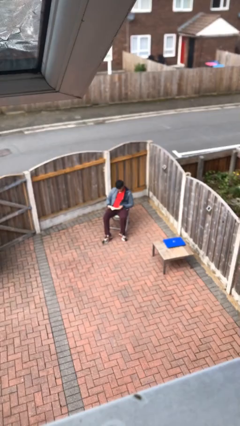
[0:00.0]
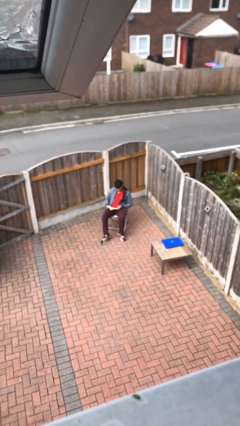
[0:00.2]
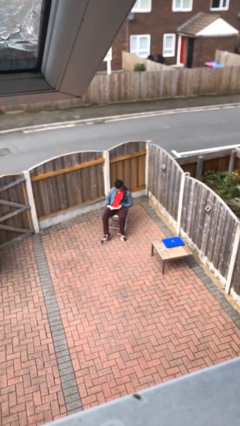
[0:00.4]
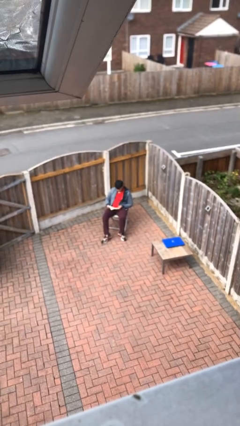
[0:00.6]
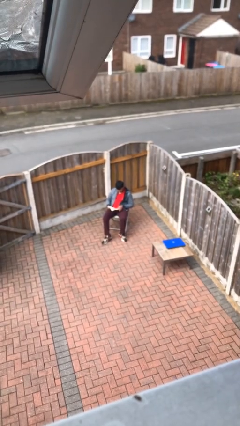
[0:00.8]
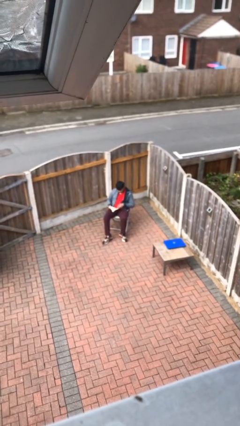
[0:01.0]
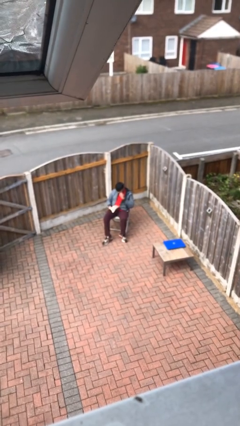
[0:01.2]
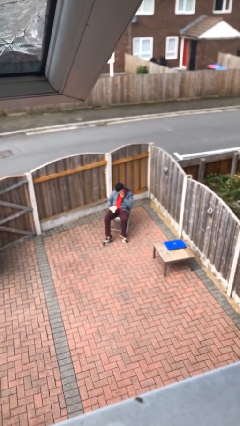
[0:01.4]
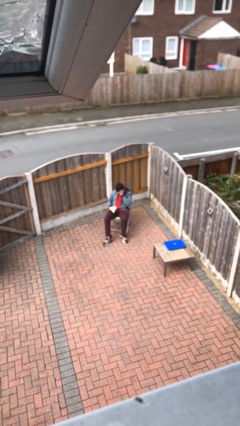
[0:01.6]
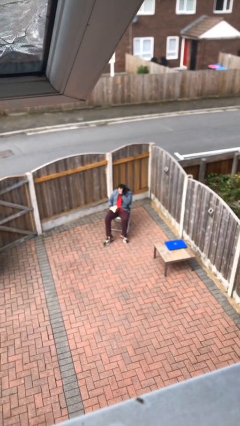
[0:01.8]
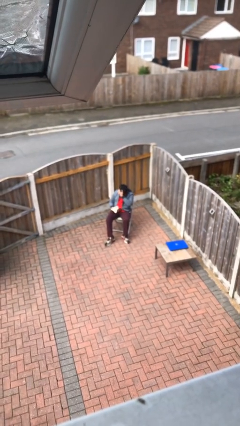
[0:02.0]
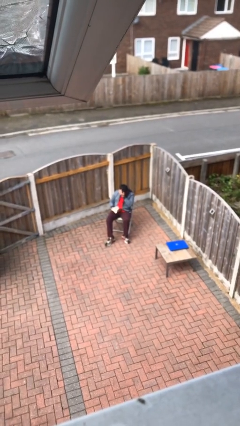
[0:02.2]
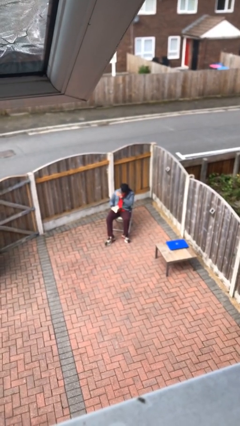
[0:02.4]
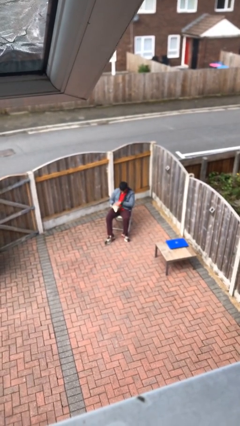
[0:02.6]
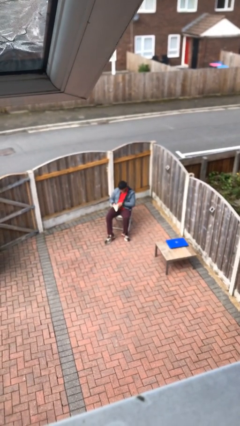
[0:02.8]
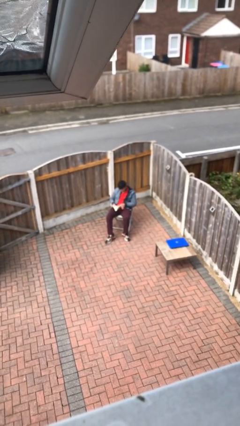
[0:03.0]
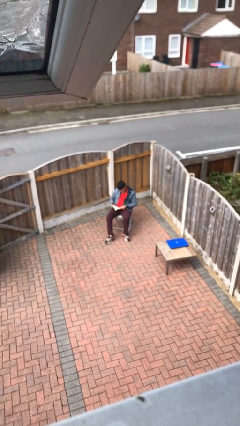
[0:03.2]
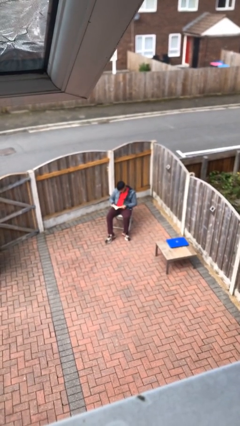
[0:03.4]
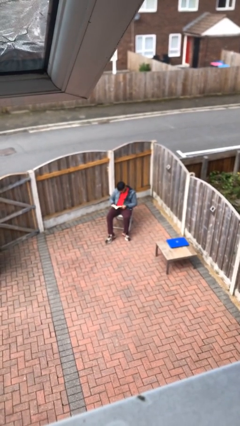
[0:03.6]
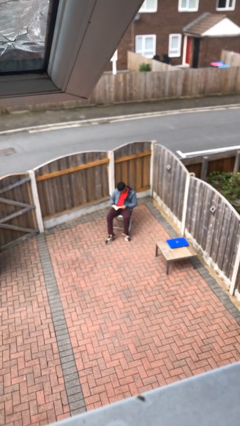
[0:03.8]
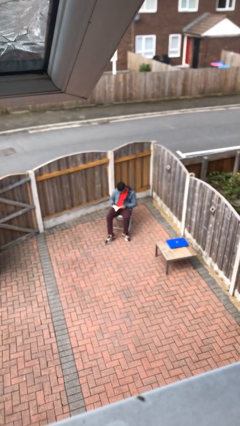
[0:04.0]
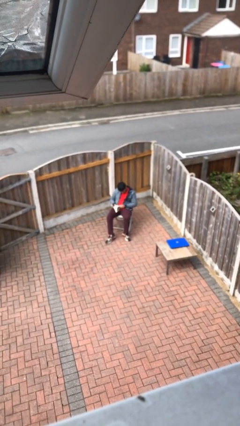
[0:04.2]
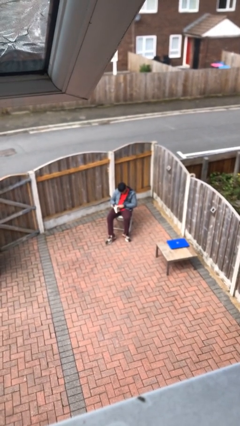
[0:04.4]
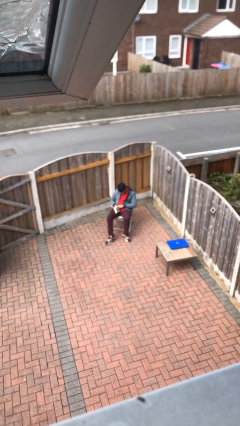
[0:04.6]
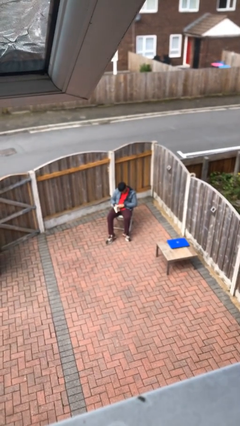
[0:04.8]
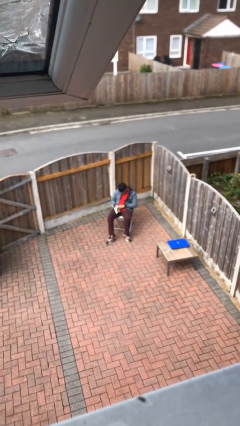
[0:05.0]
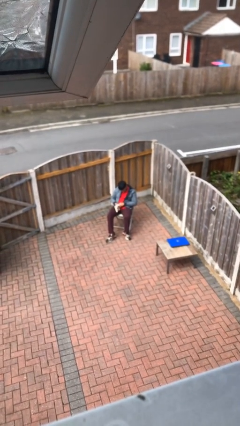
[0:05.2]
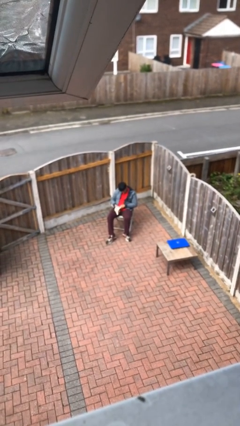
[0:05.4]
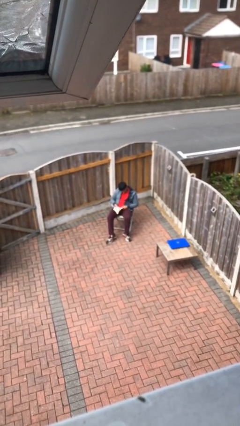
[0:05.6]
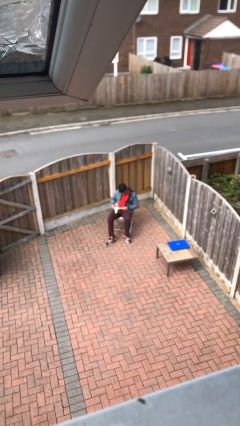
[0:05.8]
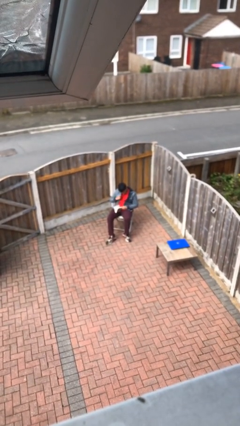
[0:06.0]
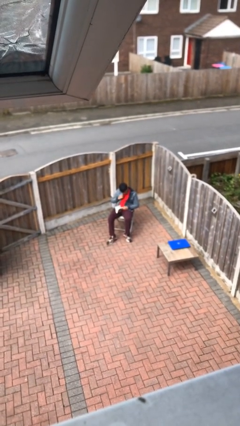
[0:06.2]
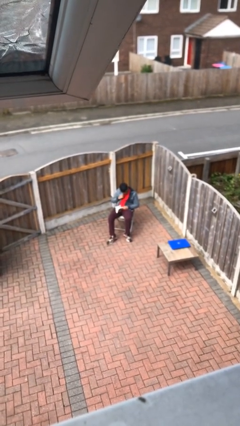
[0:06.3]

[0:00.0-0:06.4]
person reads document

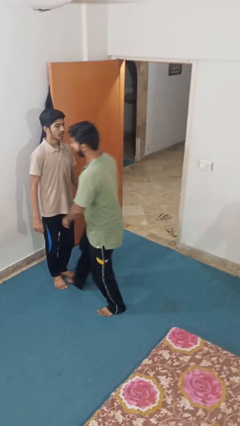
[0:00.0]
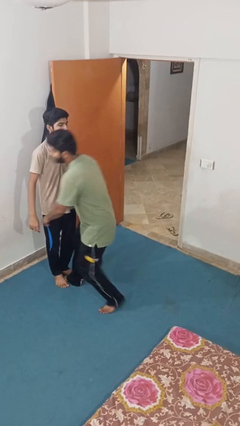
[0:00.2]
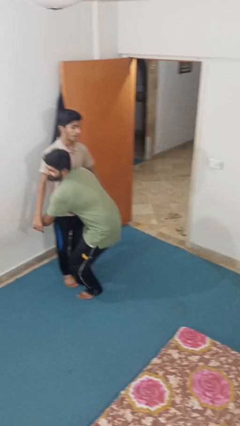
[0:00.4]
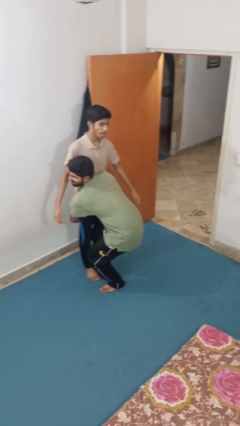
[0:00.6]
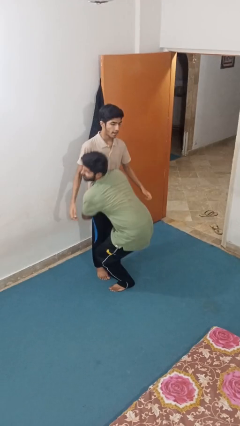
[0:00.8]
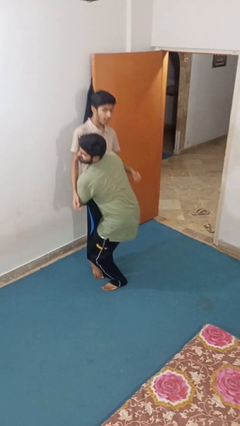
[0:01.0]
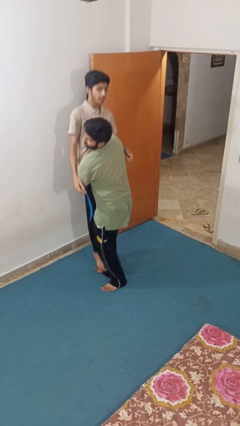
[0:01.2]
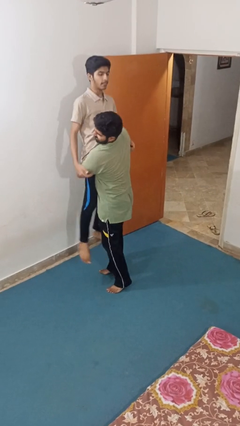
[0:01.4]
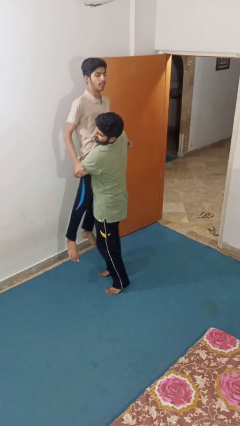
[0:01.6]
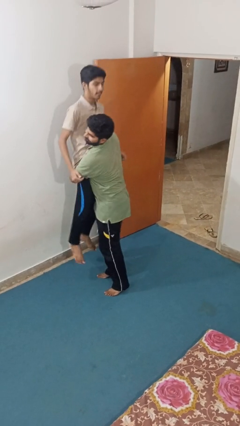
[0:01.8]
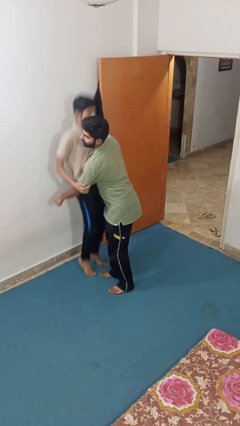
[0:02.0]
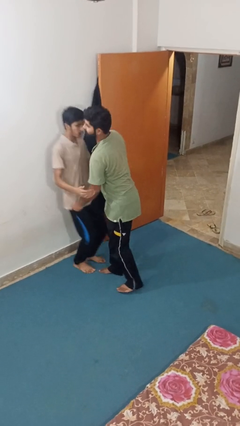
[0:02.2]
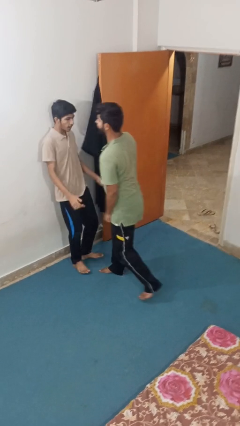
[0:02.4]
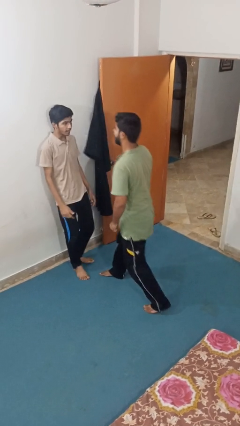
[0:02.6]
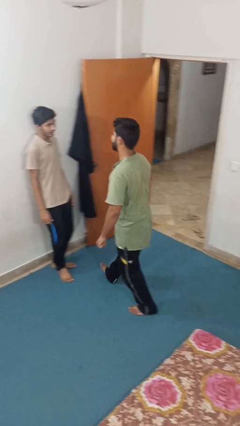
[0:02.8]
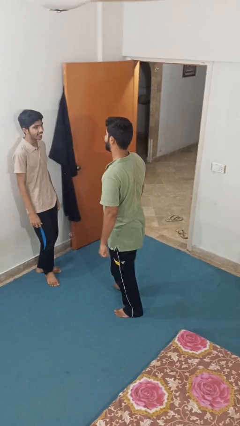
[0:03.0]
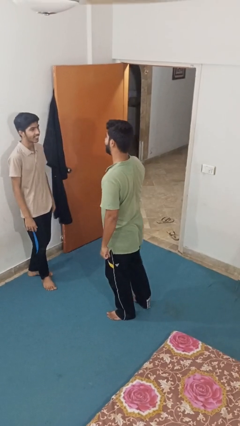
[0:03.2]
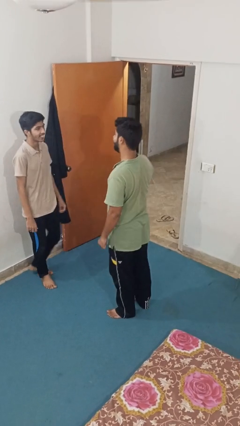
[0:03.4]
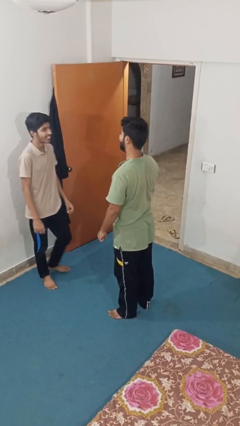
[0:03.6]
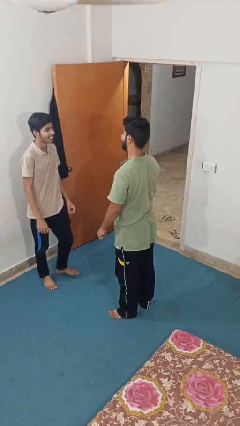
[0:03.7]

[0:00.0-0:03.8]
person picks up person

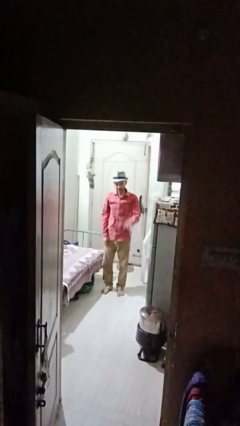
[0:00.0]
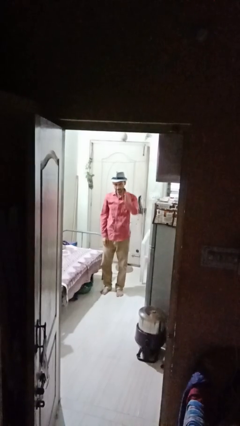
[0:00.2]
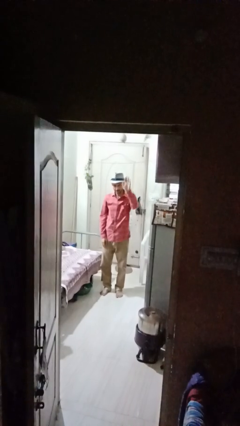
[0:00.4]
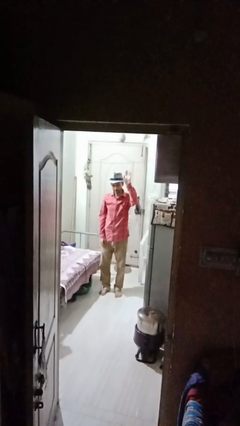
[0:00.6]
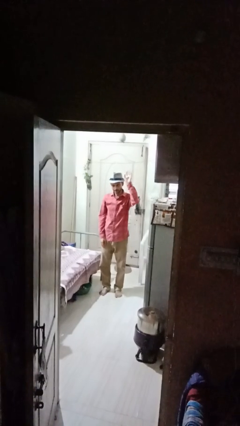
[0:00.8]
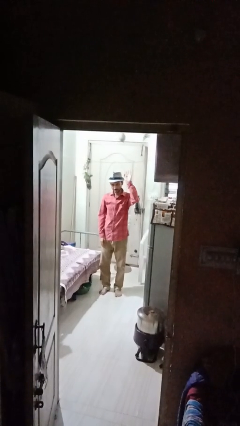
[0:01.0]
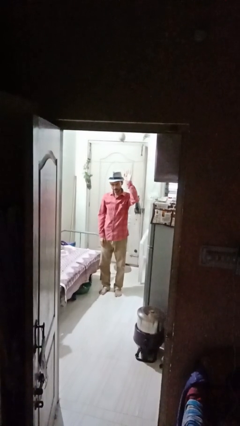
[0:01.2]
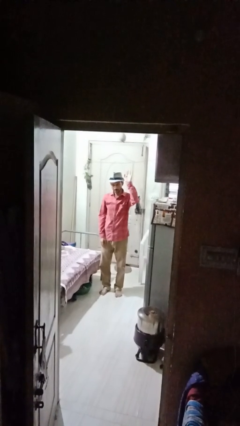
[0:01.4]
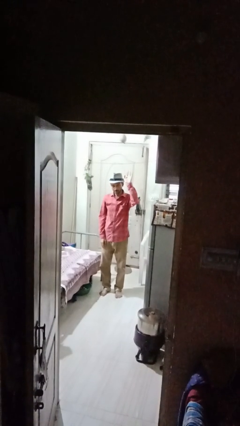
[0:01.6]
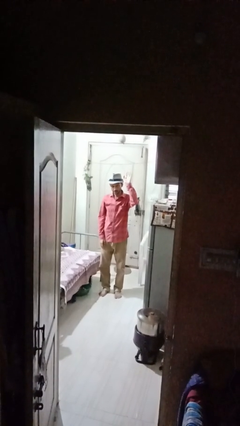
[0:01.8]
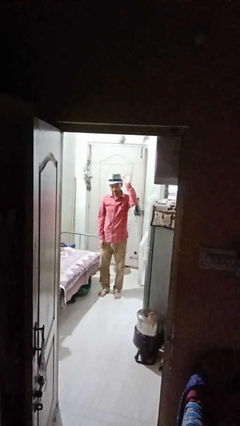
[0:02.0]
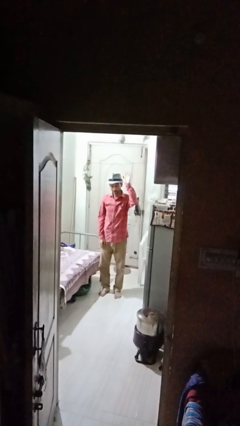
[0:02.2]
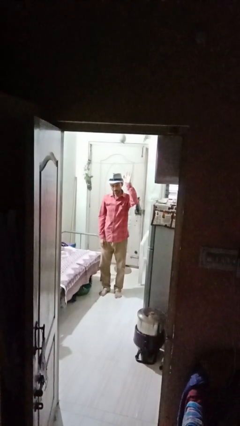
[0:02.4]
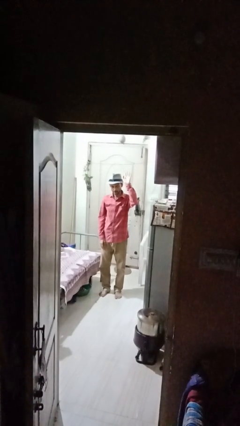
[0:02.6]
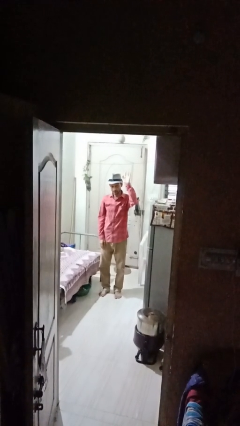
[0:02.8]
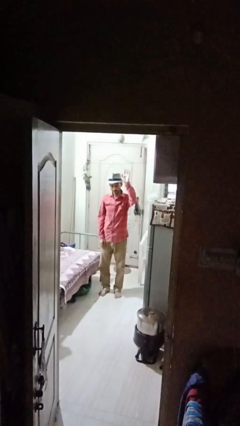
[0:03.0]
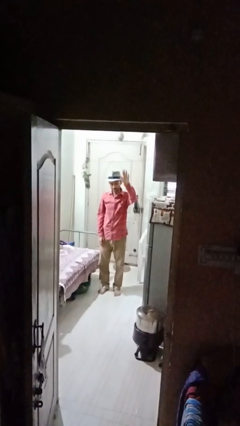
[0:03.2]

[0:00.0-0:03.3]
person gestures raise hand

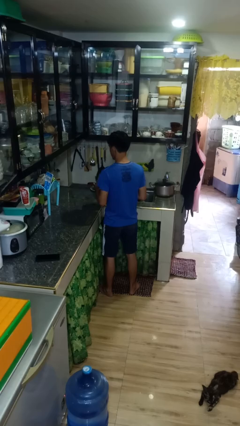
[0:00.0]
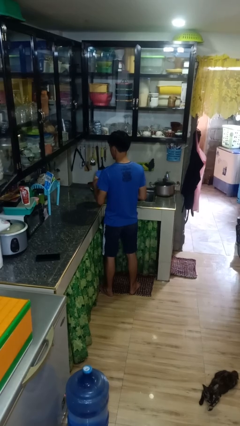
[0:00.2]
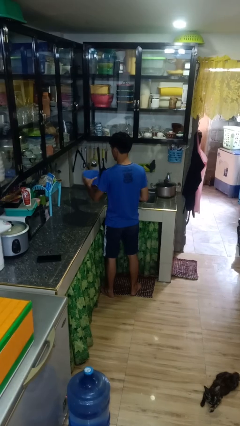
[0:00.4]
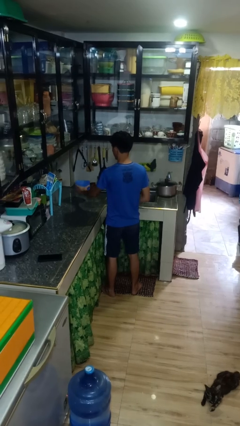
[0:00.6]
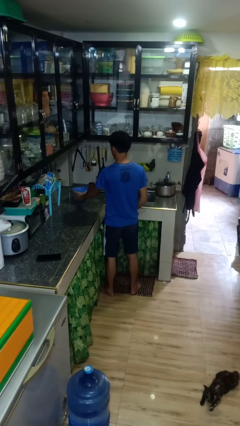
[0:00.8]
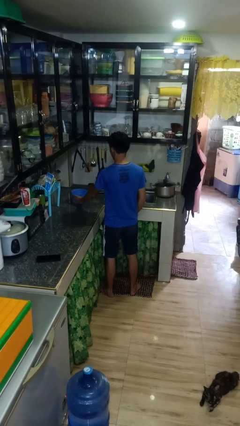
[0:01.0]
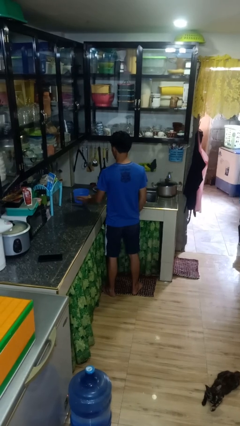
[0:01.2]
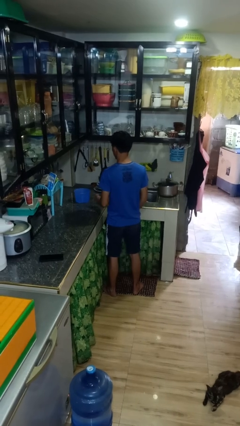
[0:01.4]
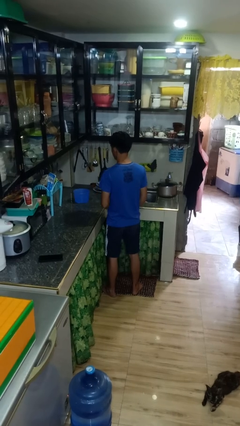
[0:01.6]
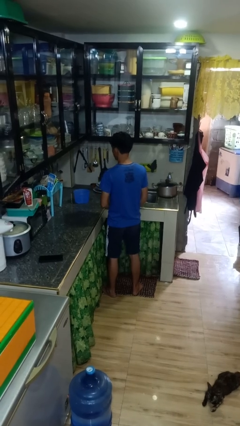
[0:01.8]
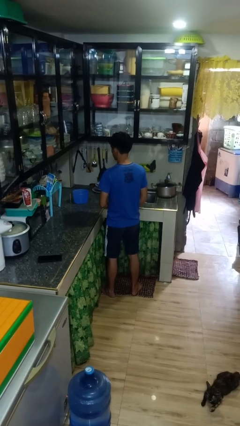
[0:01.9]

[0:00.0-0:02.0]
person puts down object on countertop

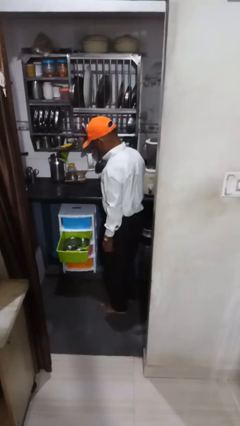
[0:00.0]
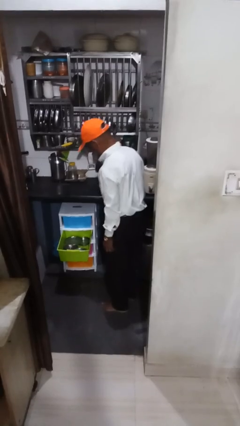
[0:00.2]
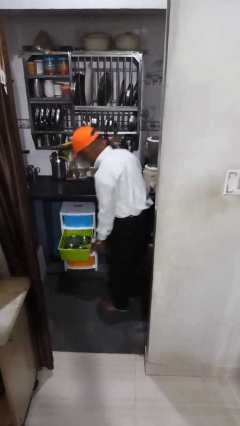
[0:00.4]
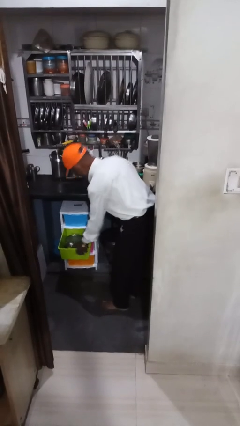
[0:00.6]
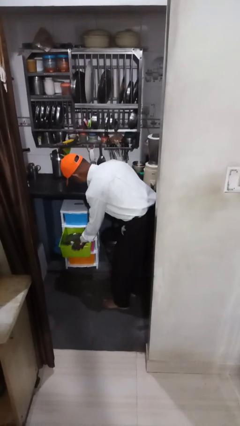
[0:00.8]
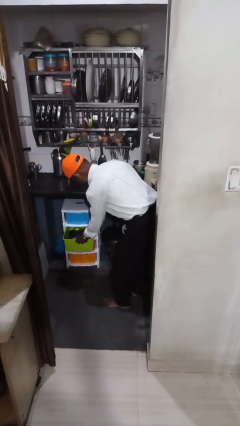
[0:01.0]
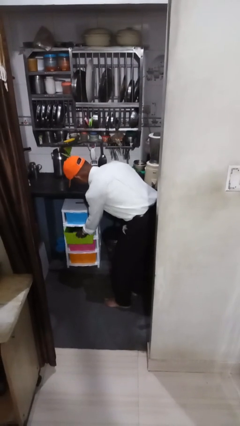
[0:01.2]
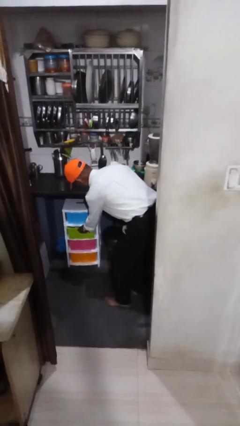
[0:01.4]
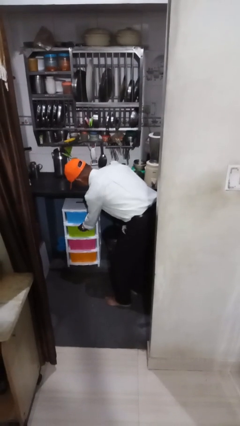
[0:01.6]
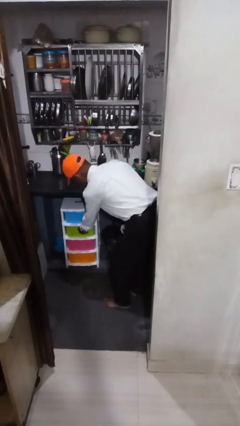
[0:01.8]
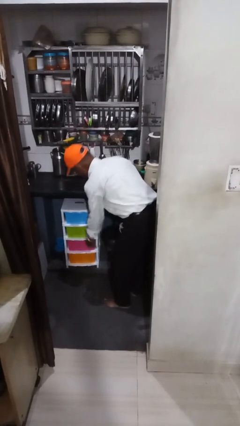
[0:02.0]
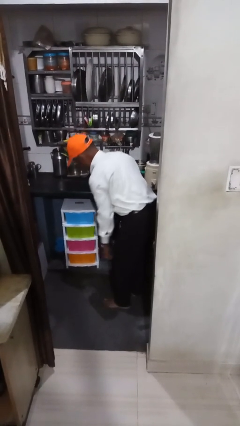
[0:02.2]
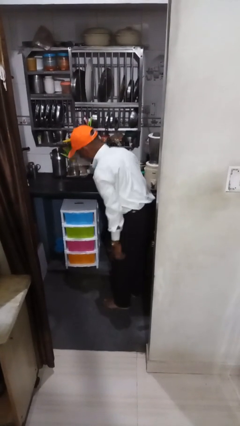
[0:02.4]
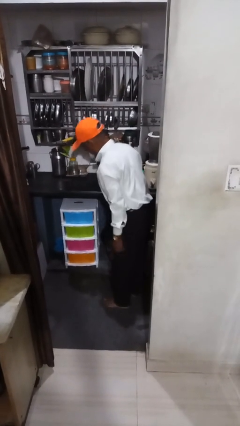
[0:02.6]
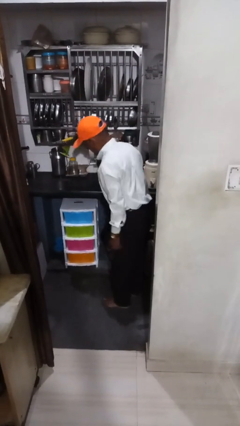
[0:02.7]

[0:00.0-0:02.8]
person closes kitchen drawer
